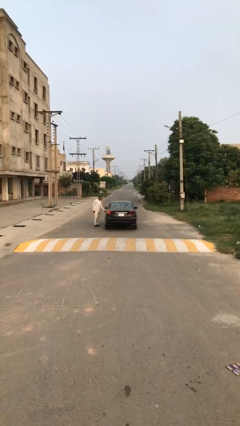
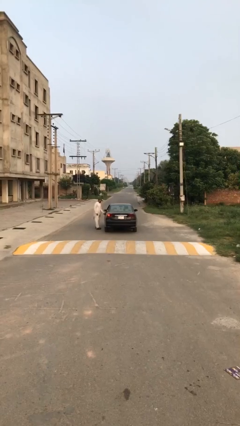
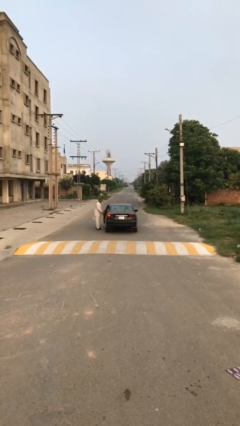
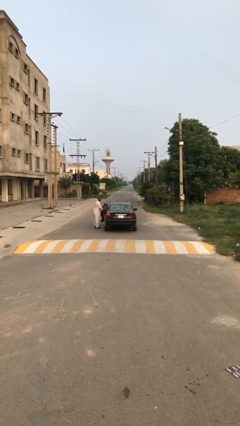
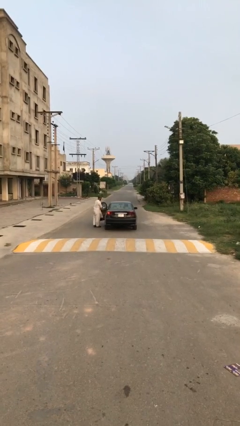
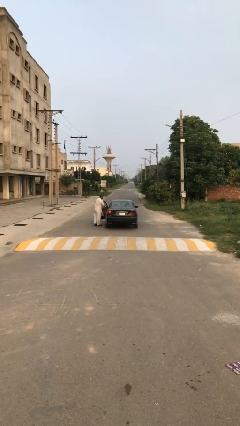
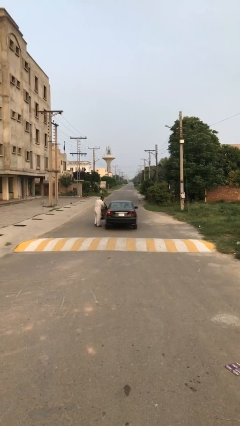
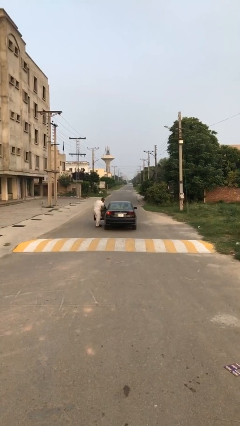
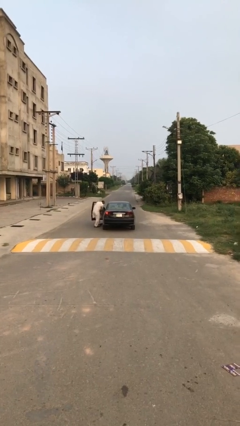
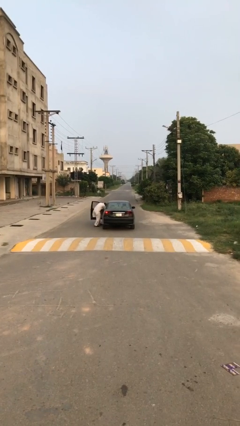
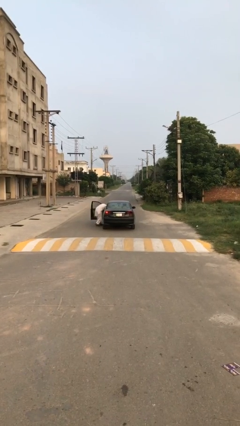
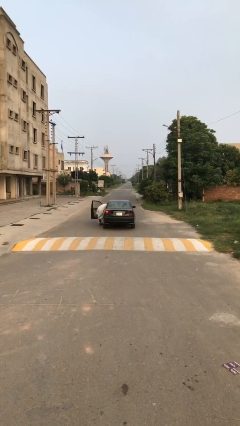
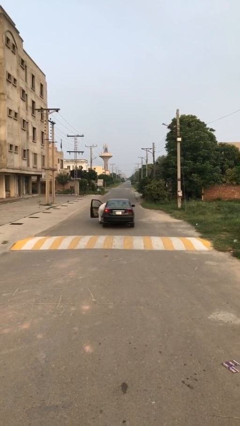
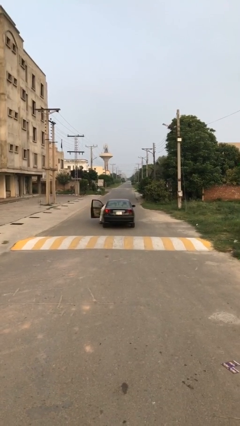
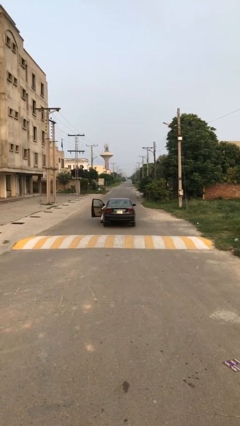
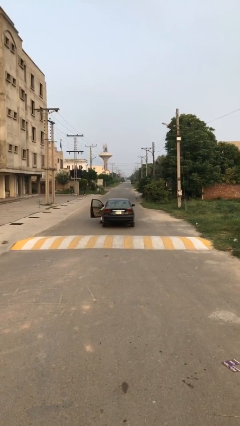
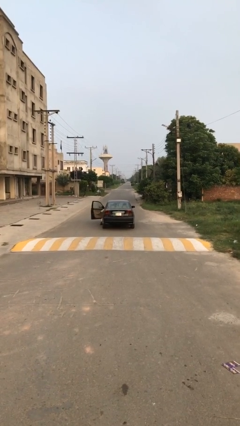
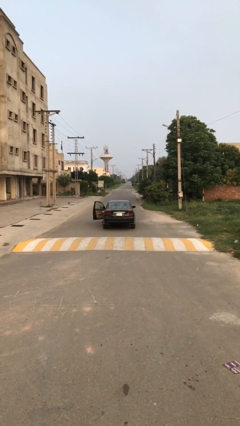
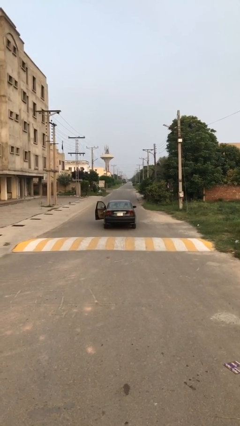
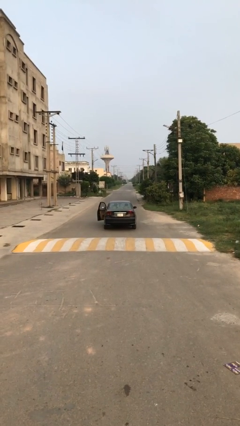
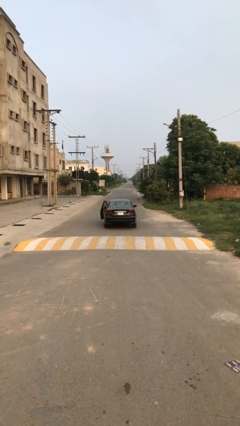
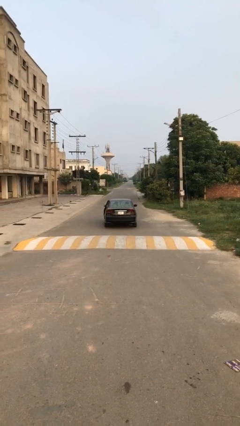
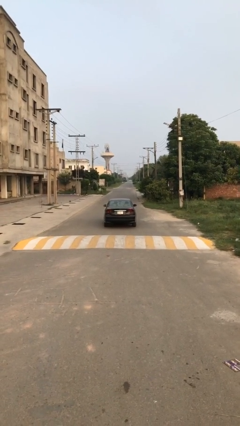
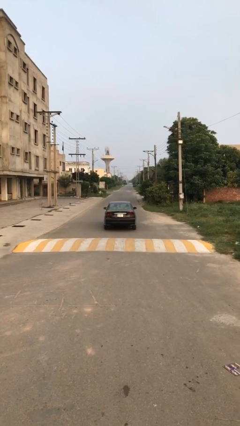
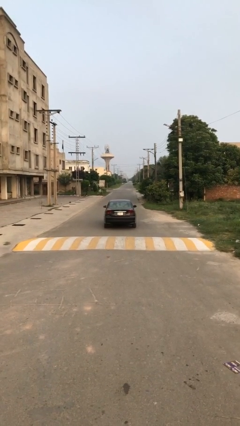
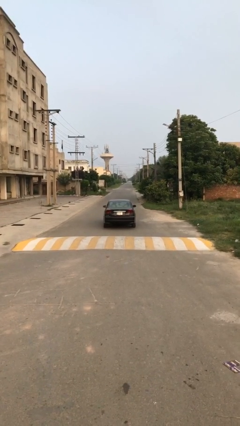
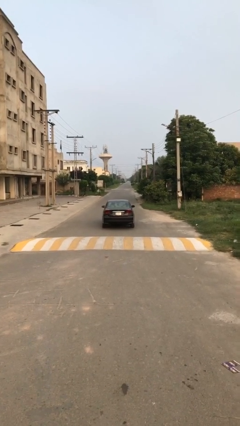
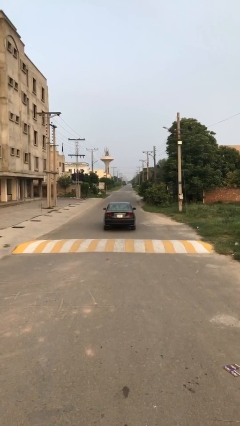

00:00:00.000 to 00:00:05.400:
car picks up person

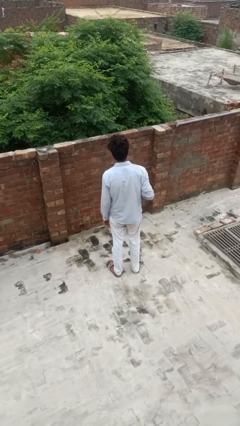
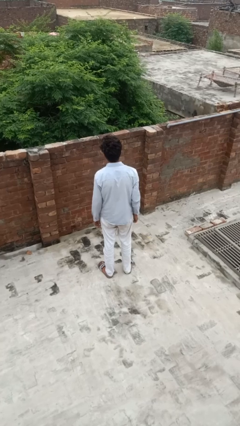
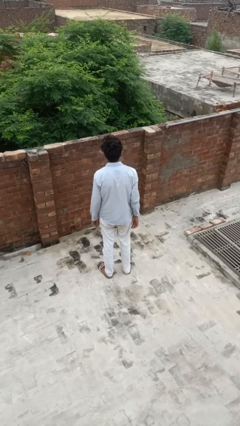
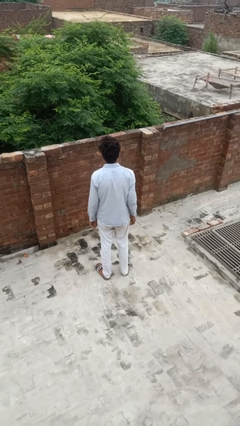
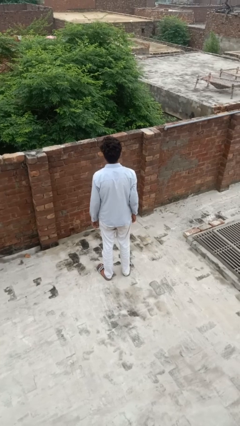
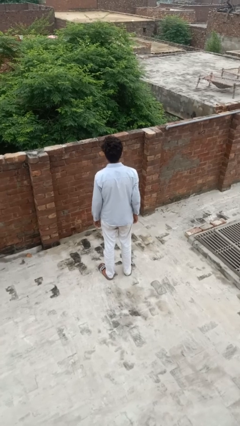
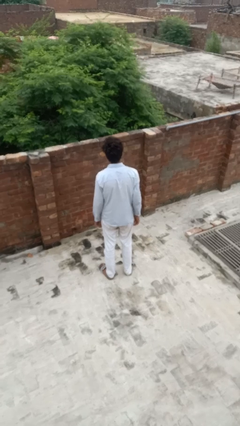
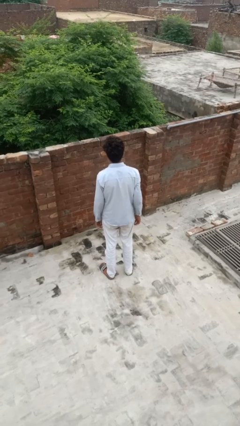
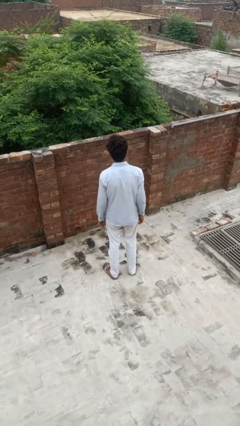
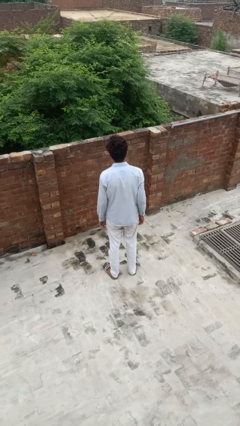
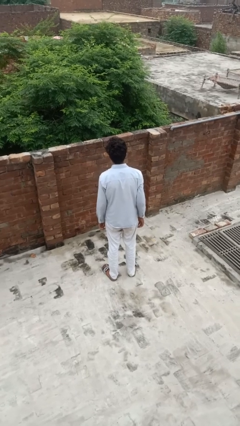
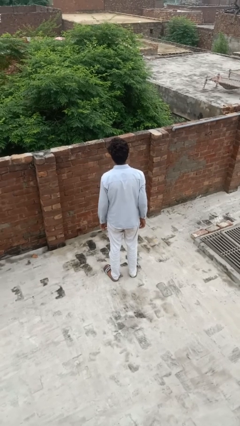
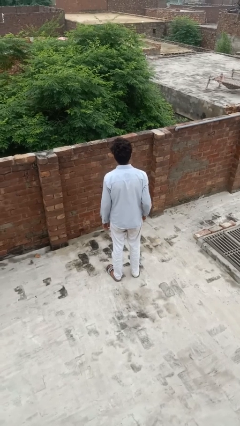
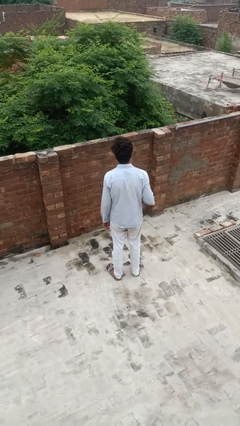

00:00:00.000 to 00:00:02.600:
person scratches face

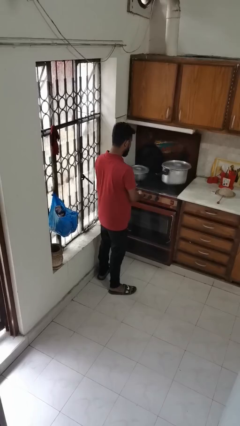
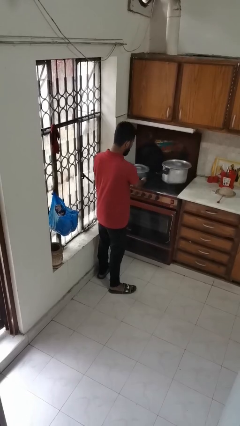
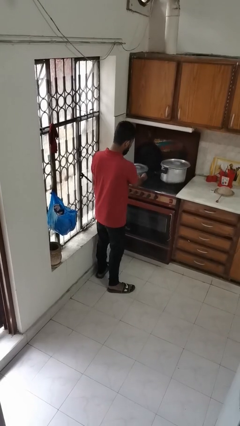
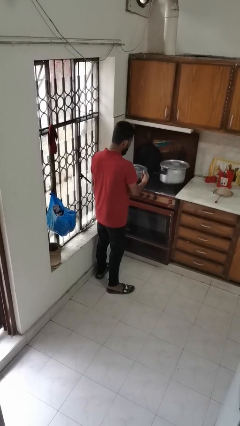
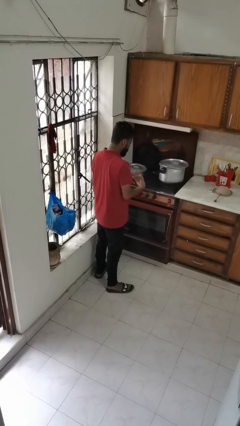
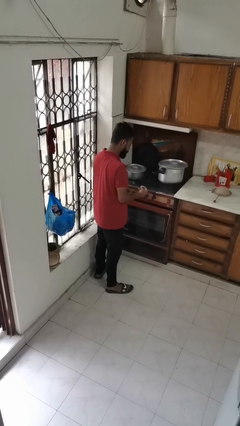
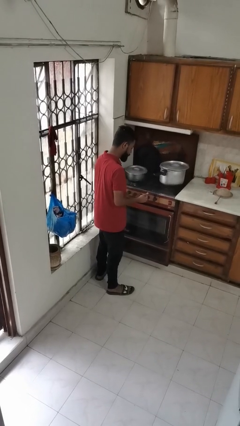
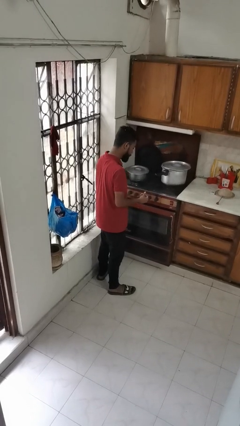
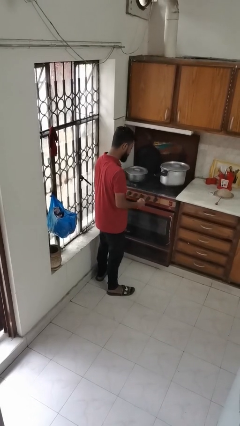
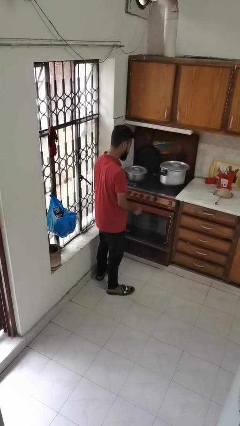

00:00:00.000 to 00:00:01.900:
person burns hand

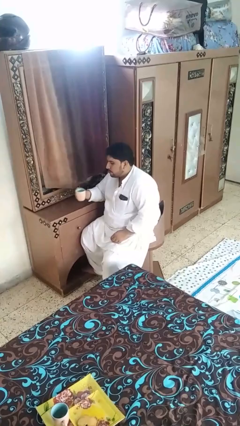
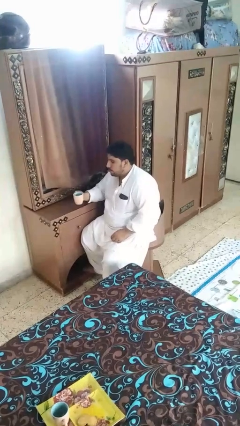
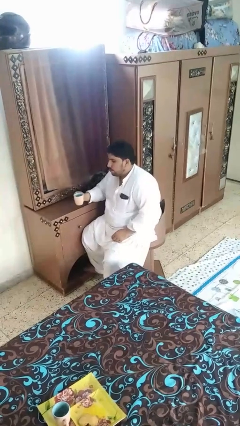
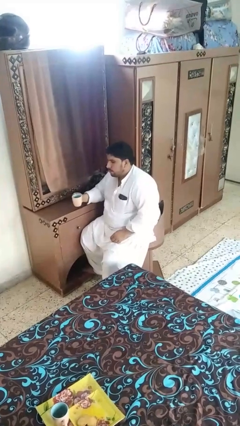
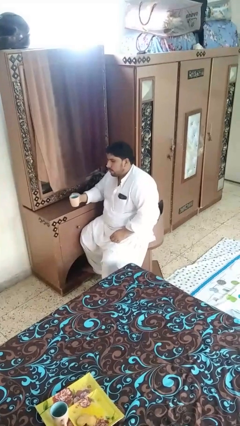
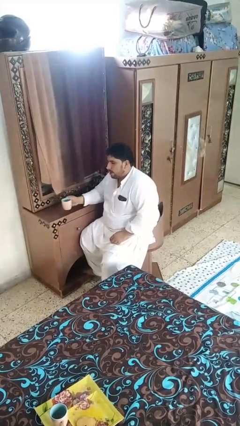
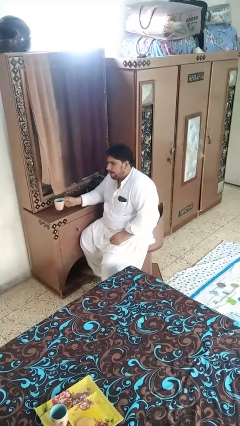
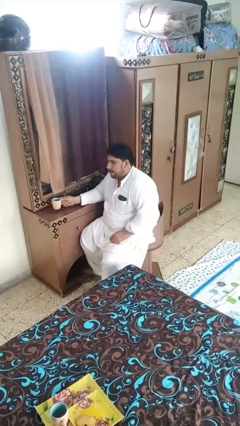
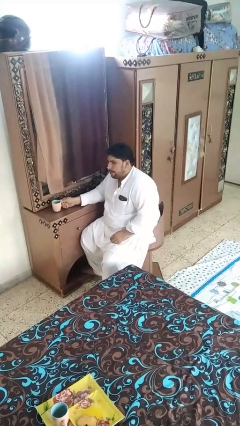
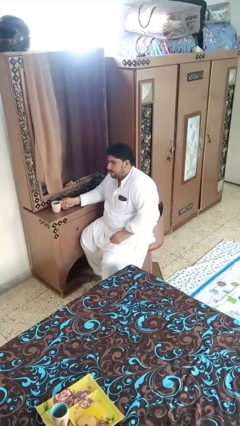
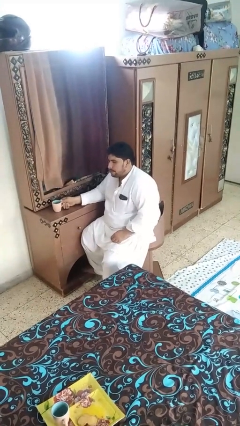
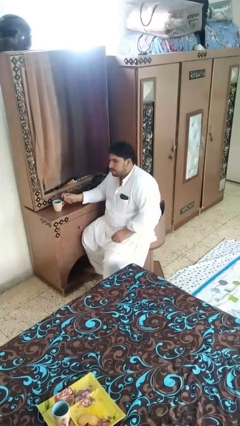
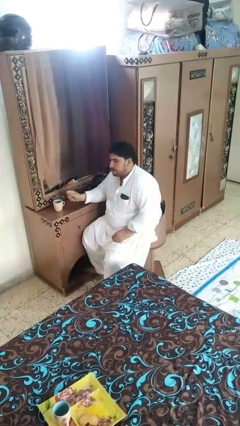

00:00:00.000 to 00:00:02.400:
person puts down object on table

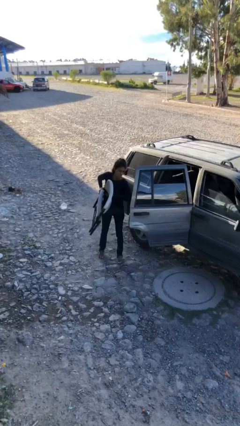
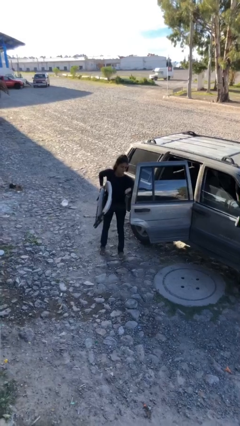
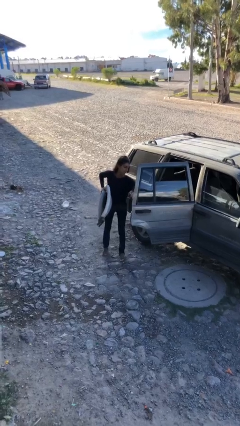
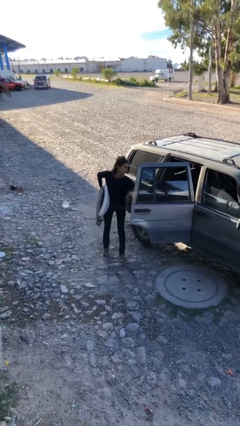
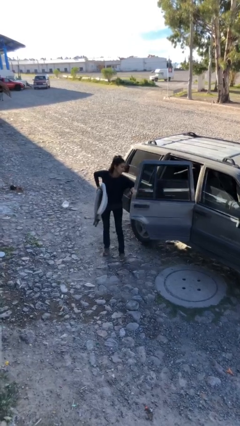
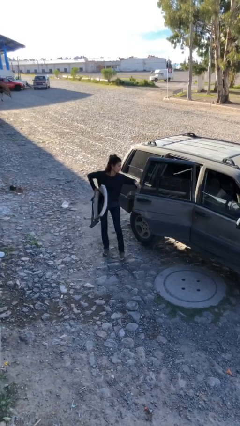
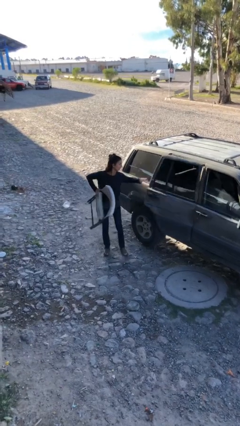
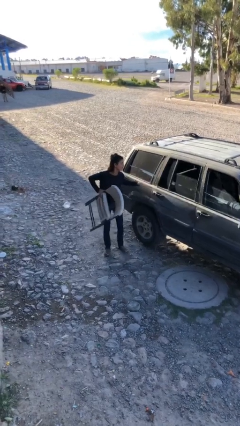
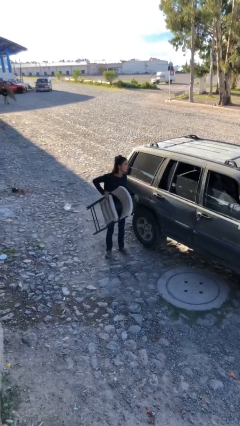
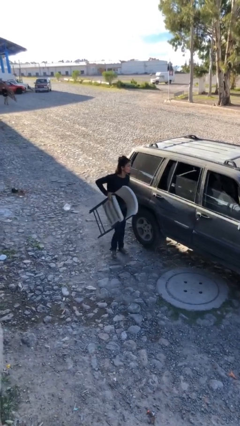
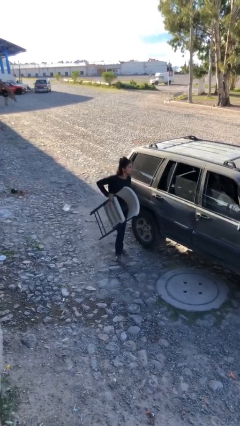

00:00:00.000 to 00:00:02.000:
person closes car door

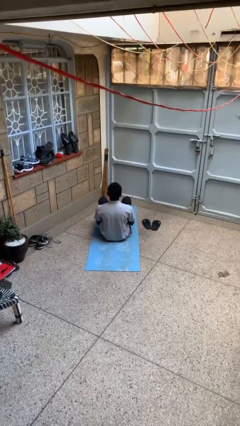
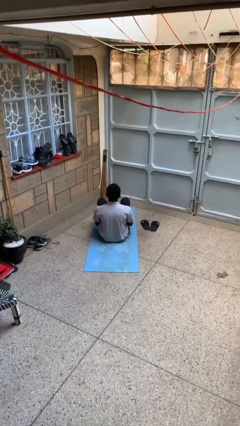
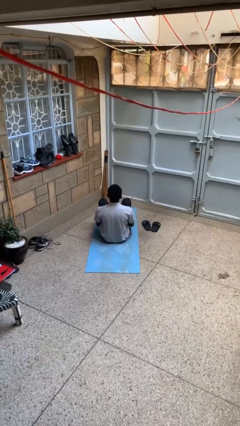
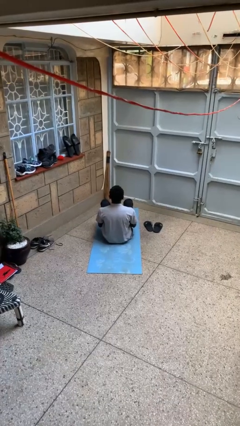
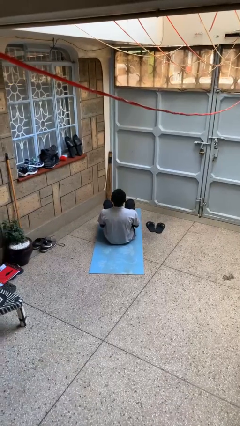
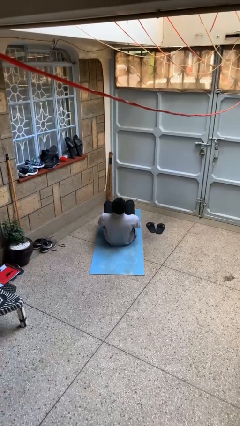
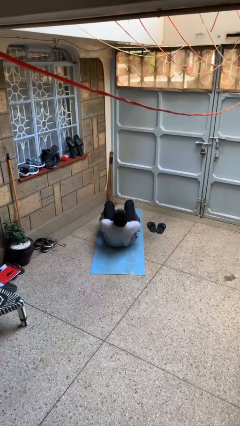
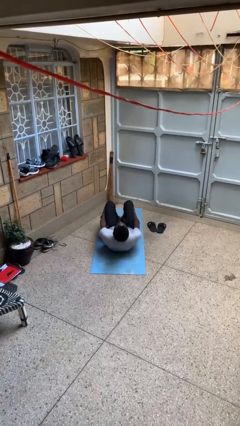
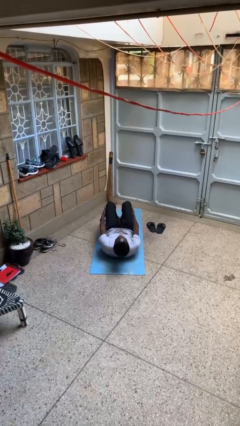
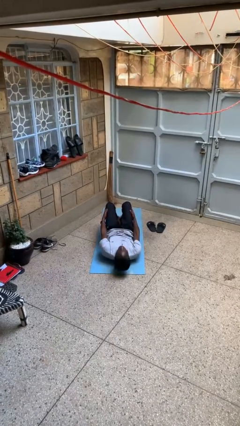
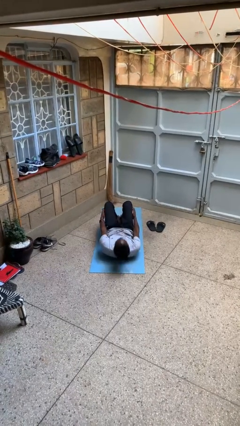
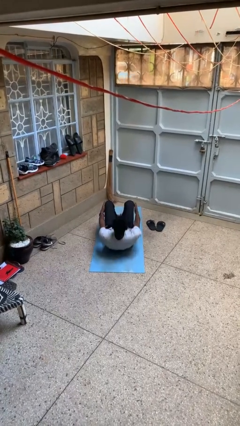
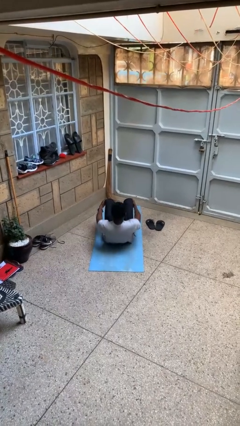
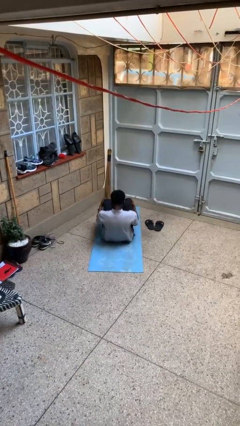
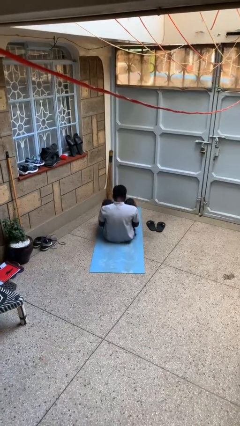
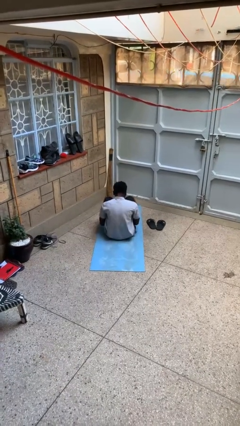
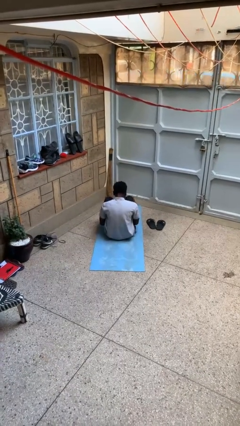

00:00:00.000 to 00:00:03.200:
person exercises with situp
